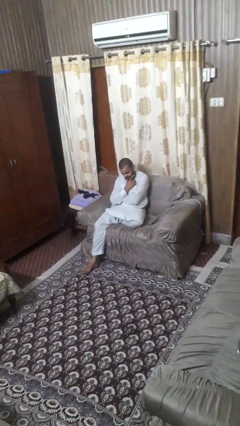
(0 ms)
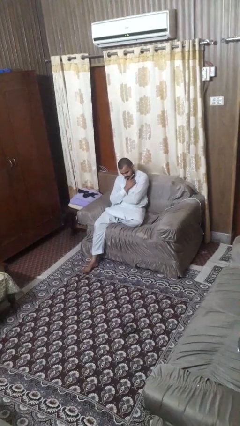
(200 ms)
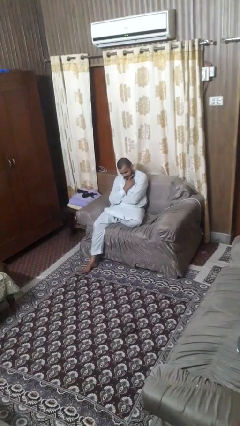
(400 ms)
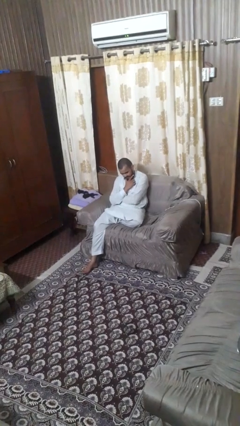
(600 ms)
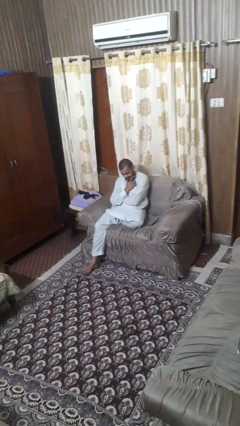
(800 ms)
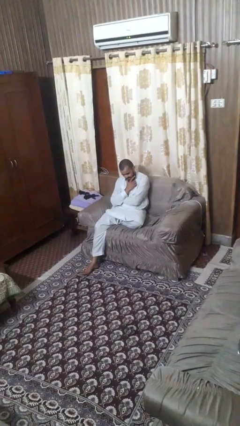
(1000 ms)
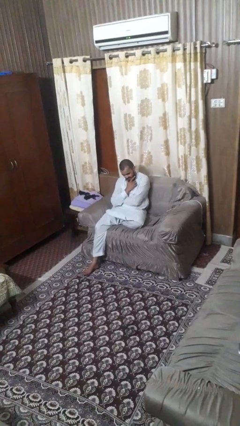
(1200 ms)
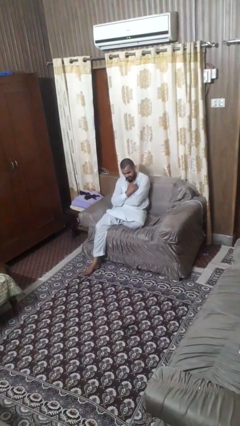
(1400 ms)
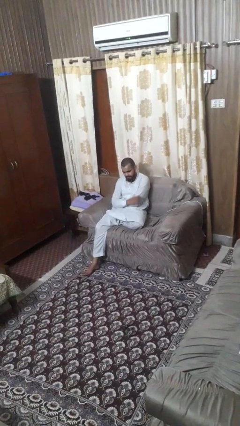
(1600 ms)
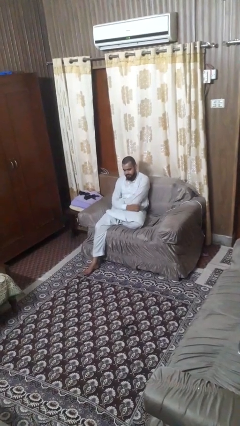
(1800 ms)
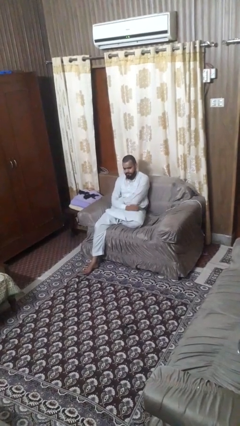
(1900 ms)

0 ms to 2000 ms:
person strokes chin

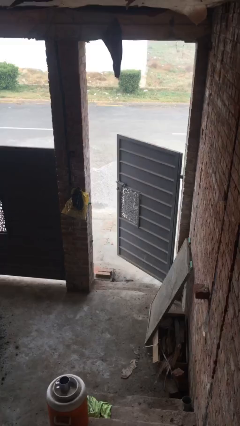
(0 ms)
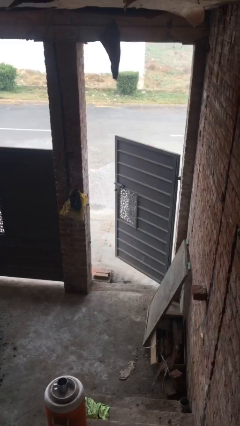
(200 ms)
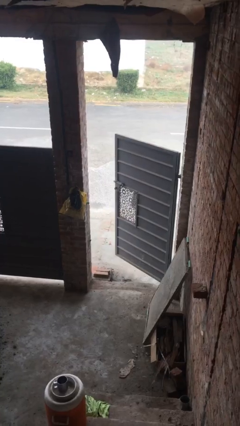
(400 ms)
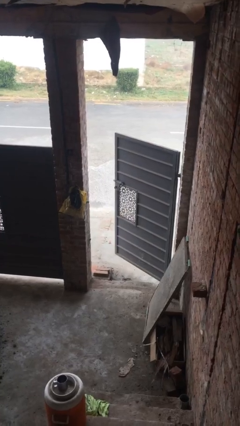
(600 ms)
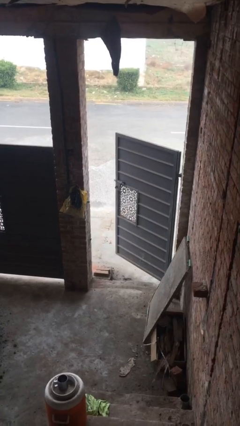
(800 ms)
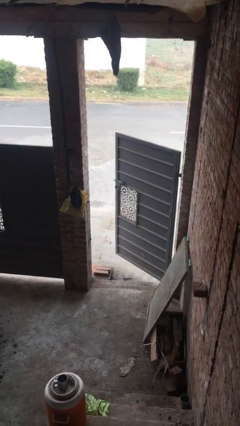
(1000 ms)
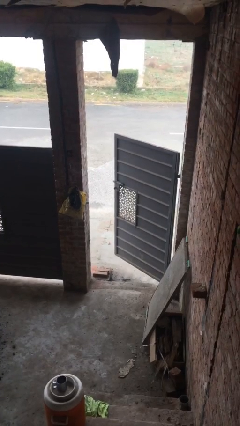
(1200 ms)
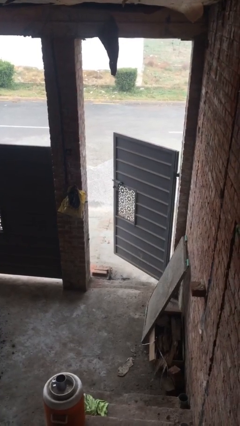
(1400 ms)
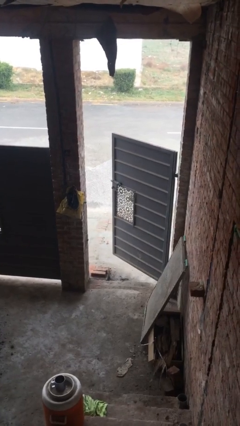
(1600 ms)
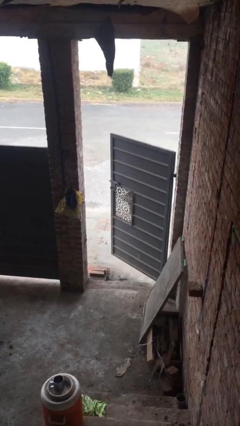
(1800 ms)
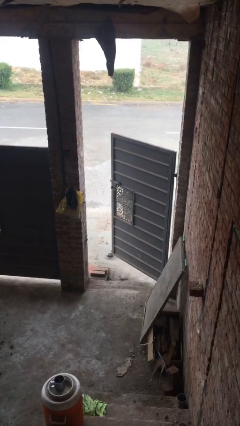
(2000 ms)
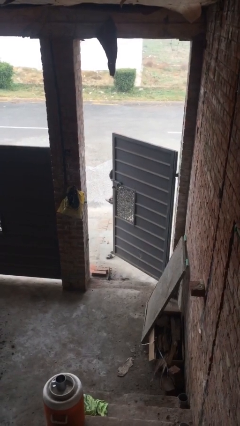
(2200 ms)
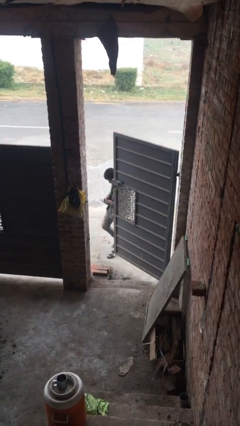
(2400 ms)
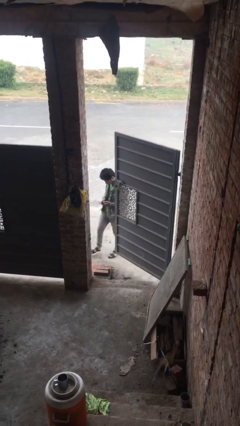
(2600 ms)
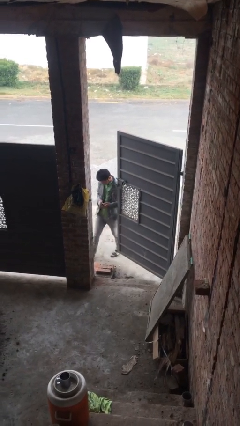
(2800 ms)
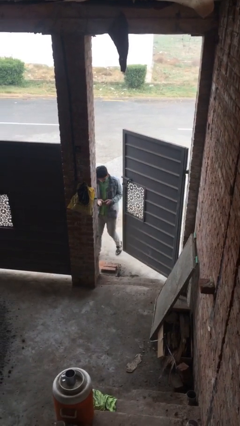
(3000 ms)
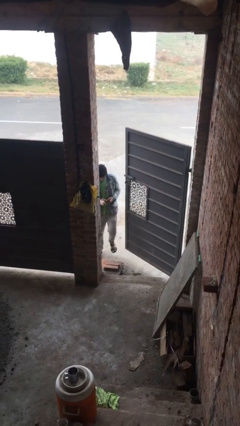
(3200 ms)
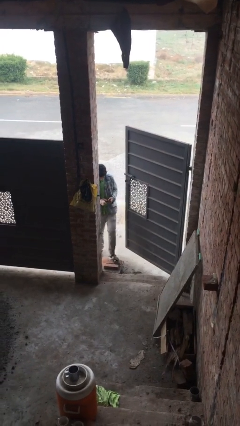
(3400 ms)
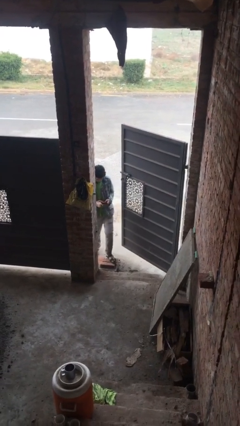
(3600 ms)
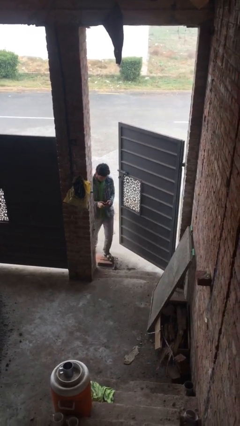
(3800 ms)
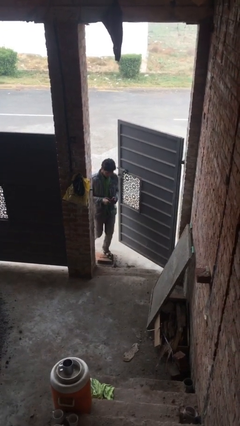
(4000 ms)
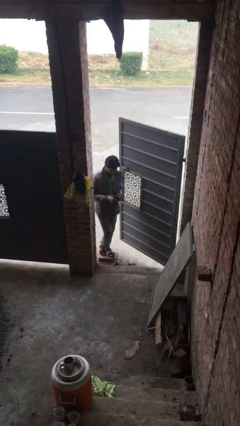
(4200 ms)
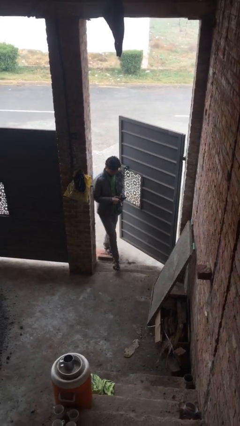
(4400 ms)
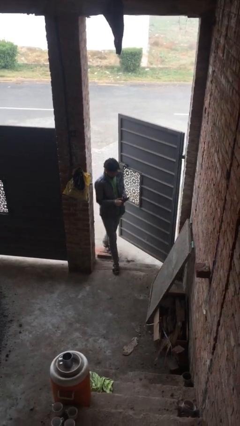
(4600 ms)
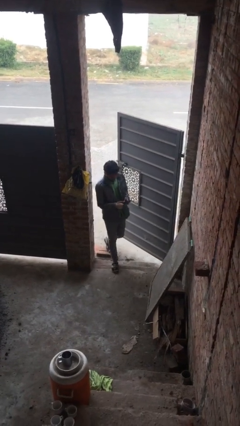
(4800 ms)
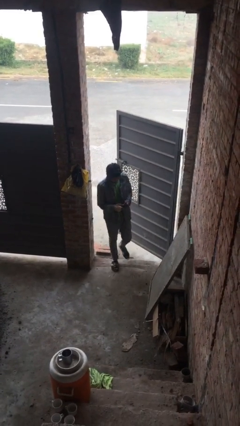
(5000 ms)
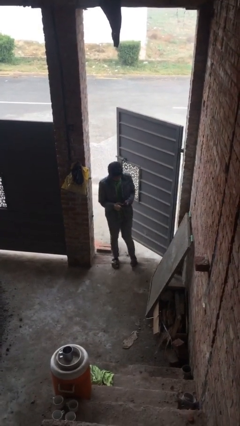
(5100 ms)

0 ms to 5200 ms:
person enters scene through structure

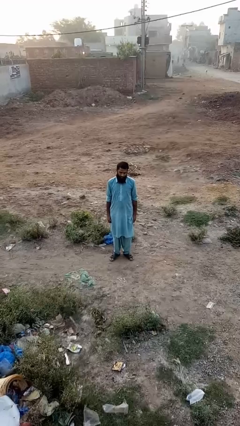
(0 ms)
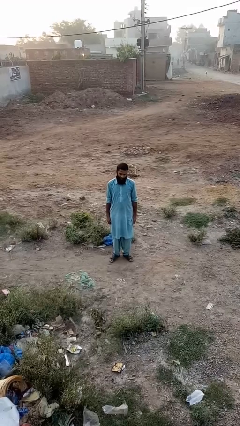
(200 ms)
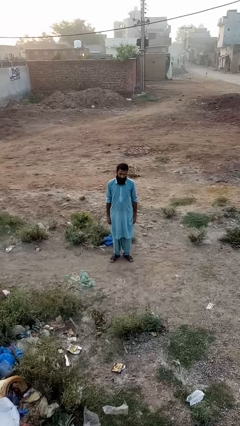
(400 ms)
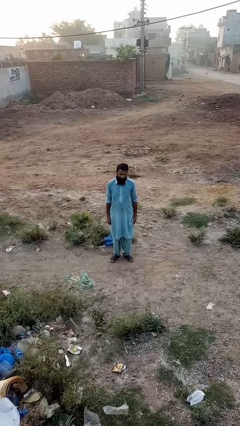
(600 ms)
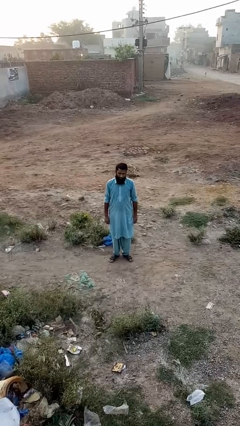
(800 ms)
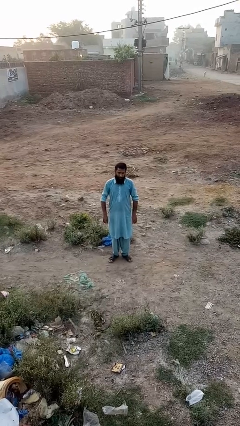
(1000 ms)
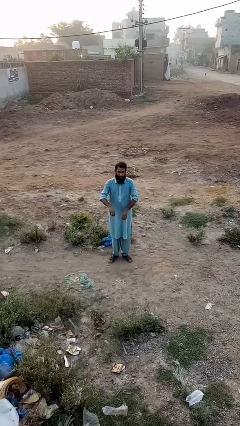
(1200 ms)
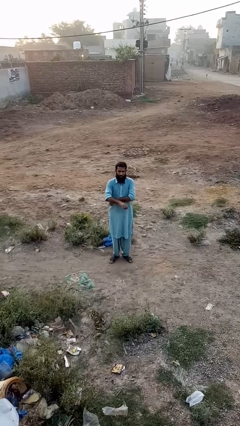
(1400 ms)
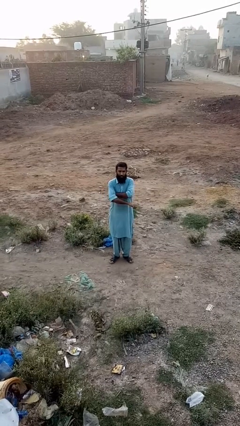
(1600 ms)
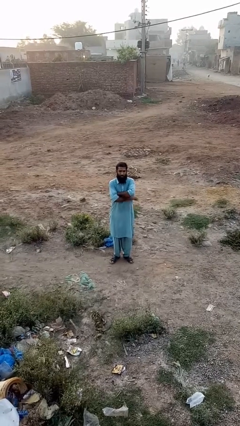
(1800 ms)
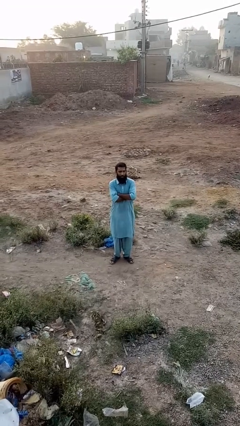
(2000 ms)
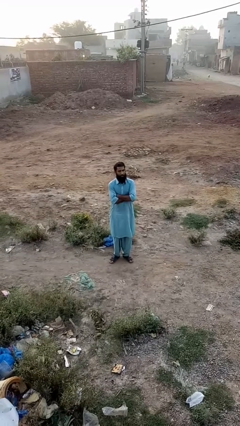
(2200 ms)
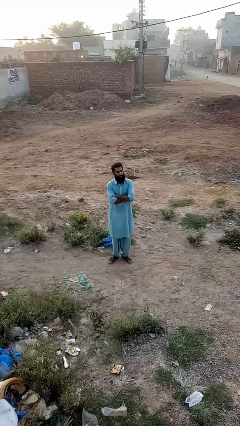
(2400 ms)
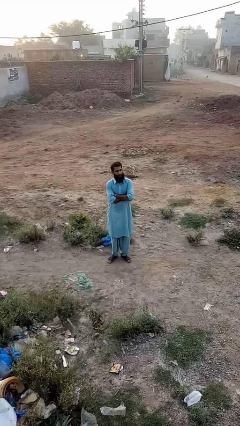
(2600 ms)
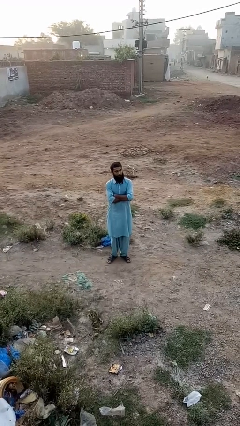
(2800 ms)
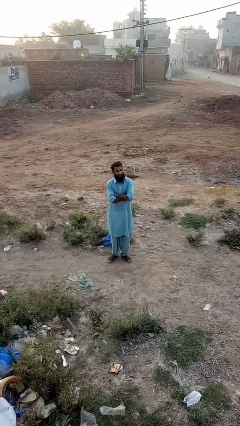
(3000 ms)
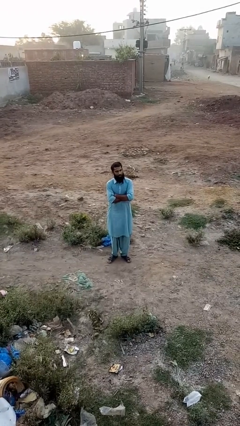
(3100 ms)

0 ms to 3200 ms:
person crosses arms

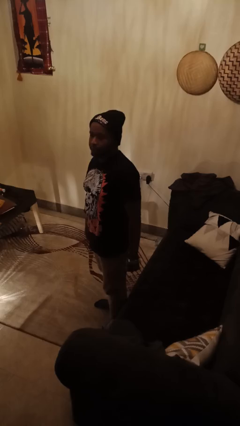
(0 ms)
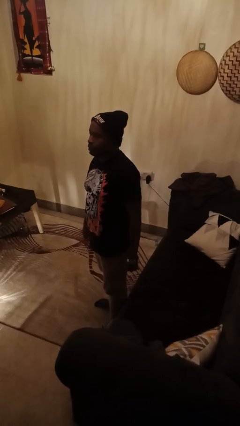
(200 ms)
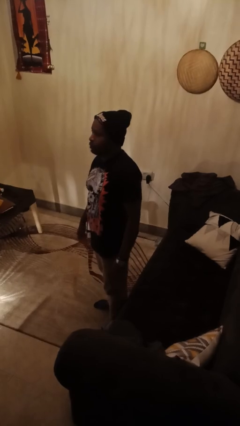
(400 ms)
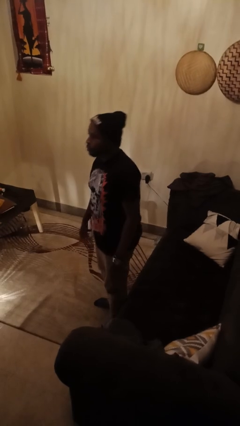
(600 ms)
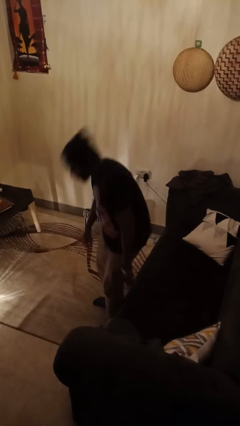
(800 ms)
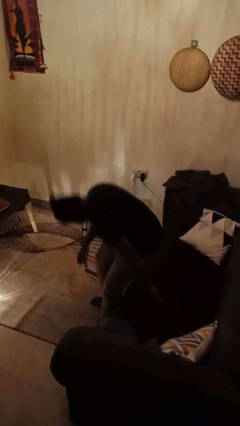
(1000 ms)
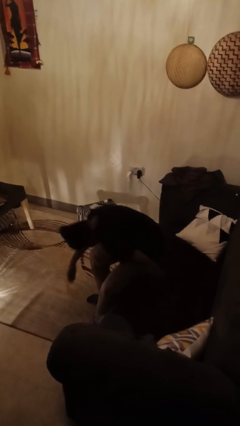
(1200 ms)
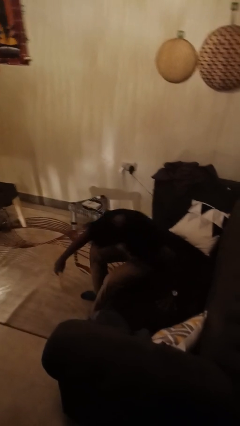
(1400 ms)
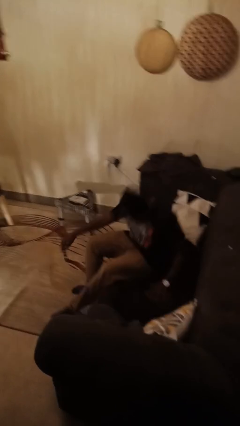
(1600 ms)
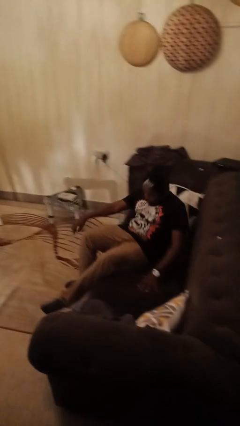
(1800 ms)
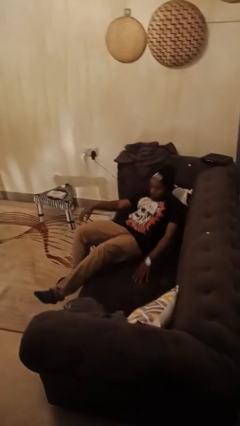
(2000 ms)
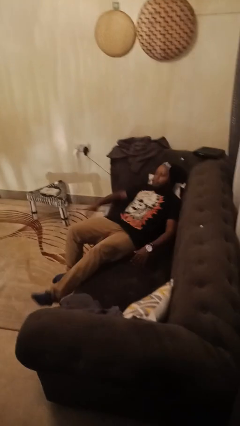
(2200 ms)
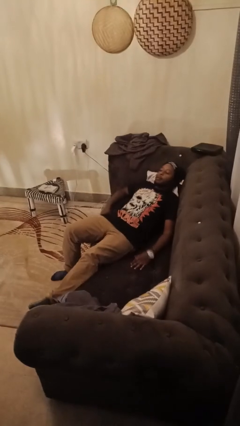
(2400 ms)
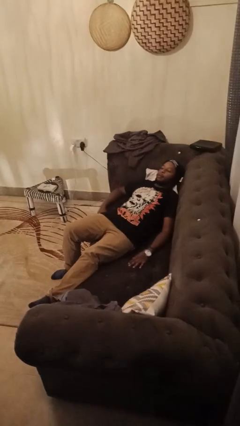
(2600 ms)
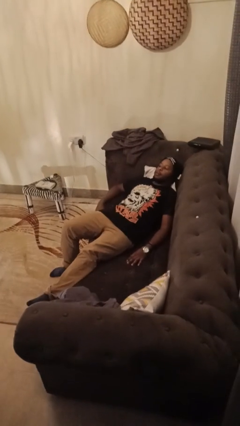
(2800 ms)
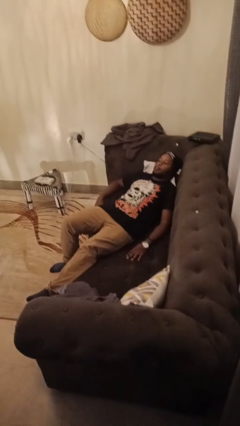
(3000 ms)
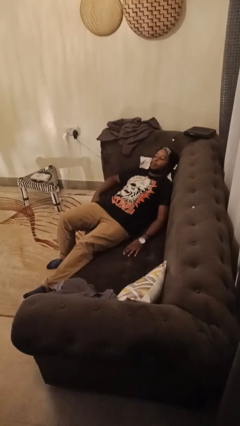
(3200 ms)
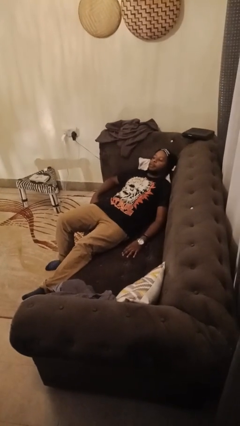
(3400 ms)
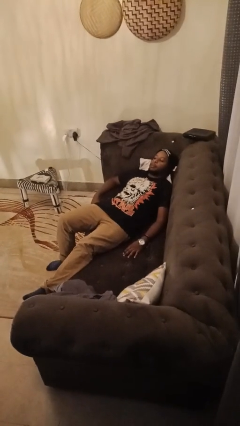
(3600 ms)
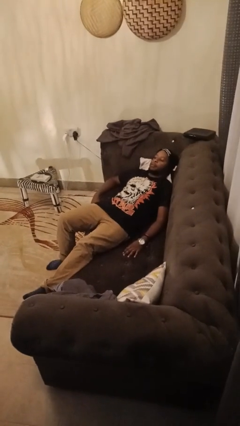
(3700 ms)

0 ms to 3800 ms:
person lies down on couch

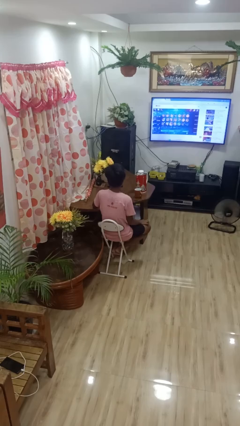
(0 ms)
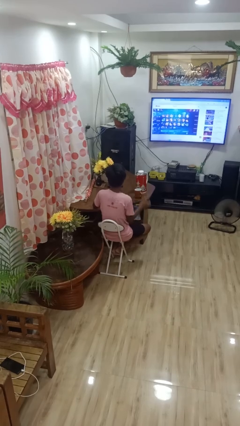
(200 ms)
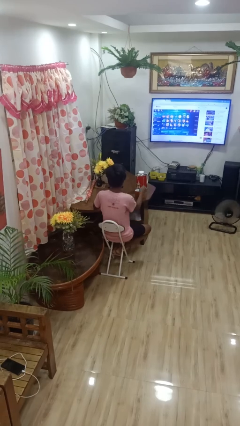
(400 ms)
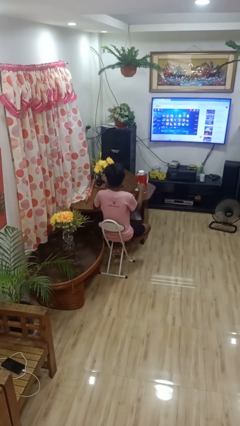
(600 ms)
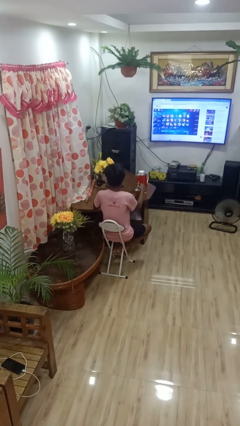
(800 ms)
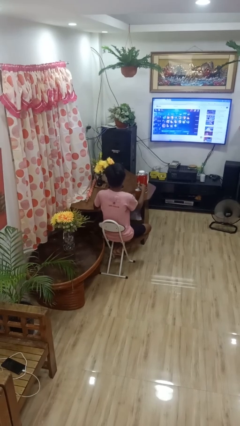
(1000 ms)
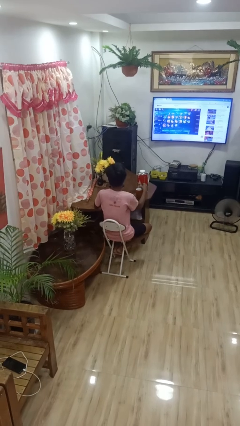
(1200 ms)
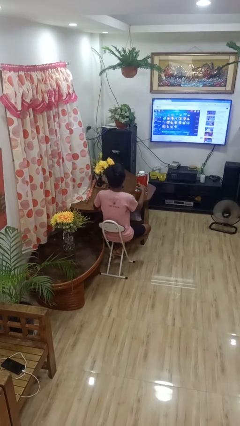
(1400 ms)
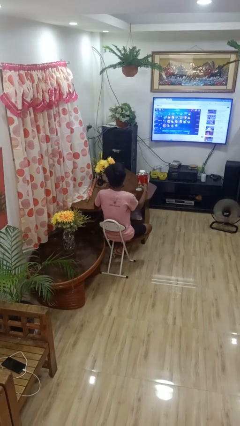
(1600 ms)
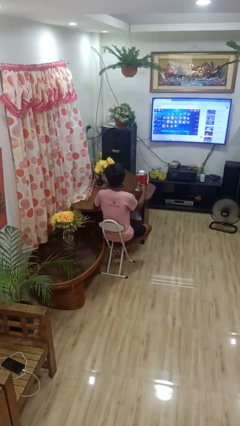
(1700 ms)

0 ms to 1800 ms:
person stirs mug

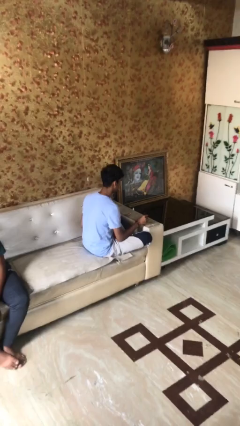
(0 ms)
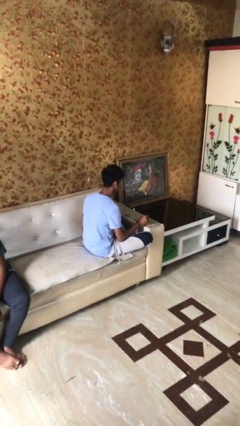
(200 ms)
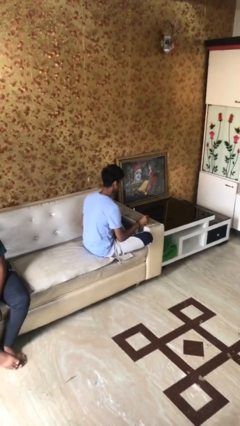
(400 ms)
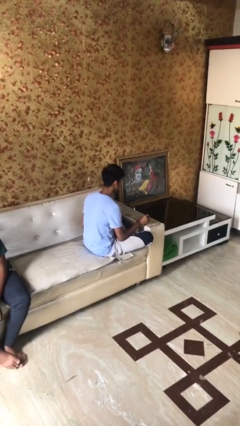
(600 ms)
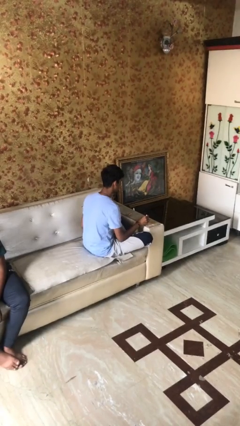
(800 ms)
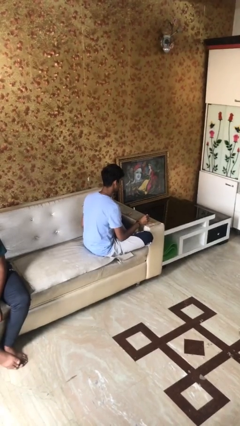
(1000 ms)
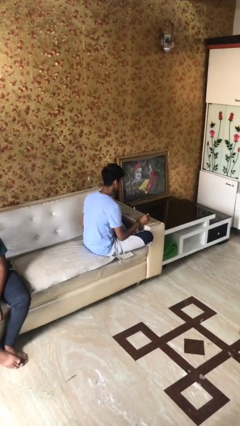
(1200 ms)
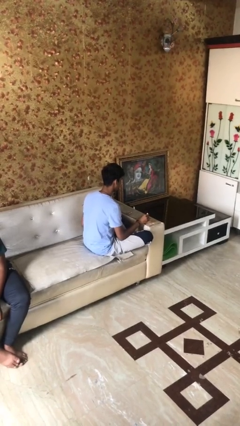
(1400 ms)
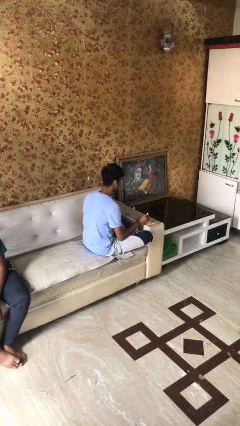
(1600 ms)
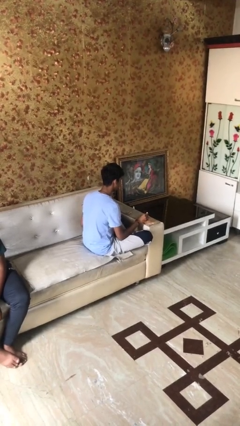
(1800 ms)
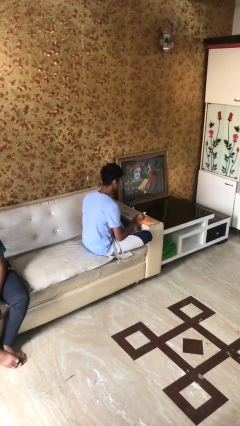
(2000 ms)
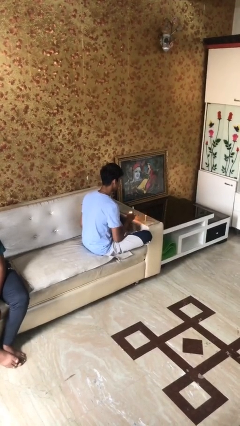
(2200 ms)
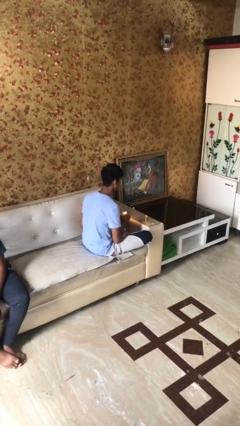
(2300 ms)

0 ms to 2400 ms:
person lights candle
